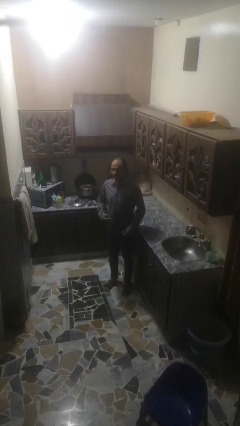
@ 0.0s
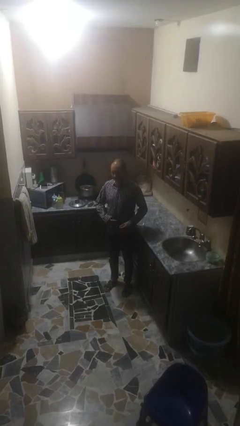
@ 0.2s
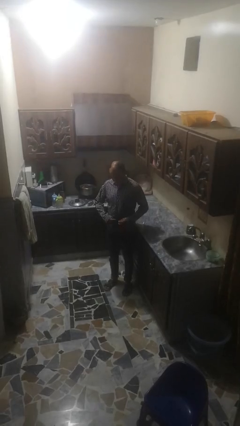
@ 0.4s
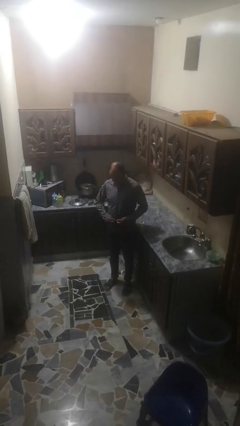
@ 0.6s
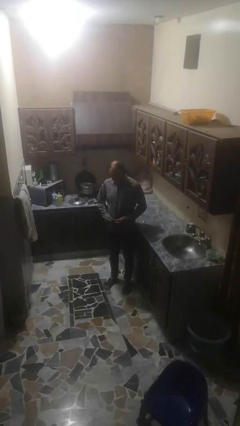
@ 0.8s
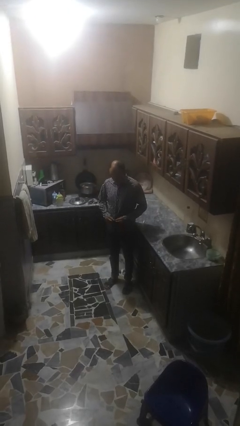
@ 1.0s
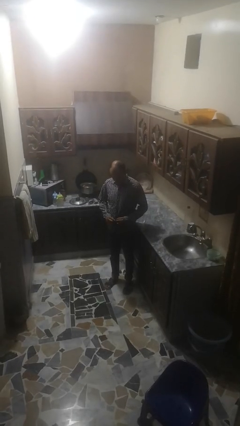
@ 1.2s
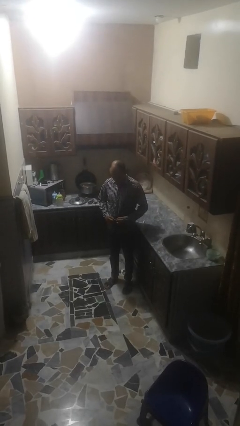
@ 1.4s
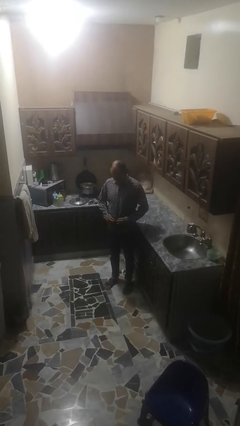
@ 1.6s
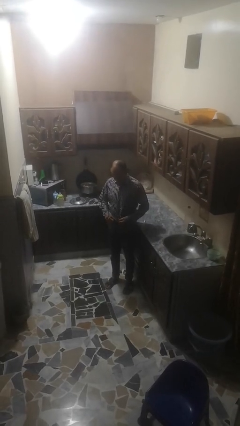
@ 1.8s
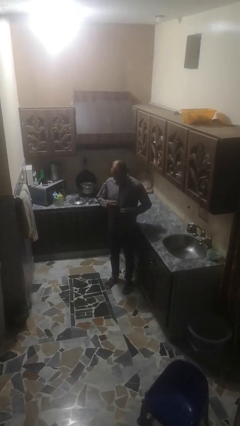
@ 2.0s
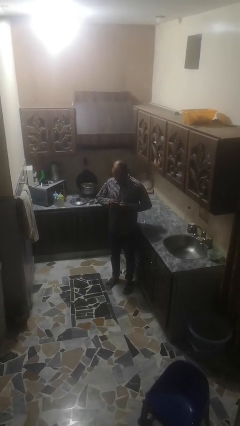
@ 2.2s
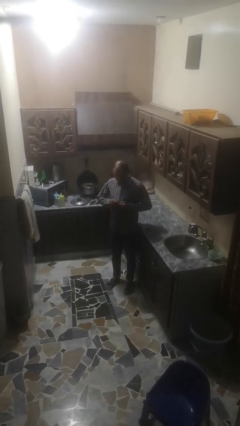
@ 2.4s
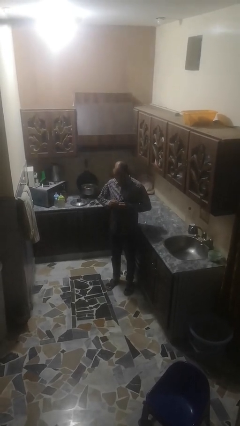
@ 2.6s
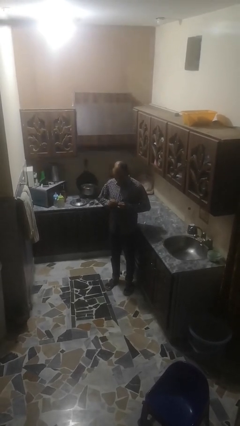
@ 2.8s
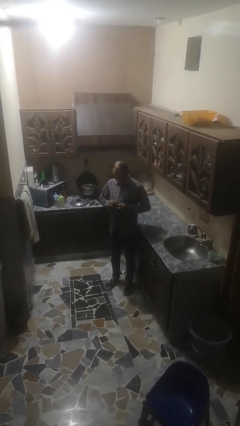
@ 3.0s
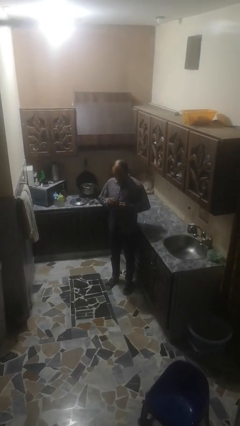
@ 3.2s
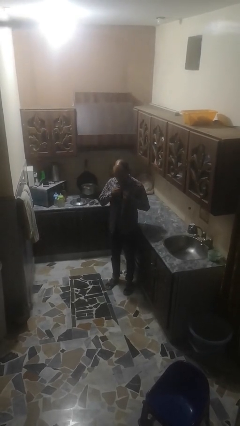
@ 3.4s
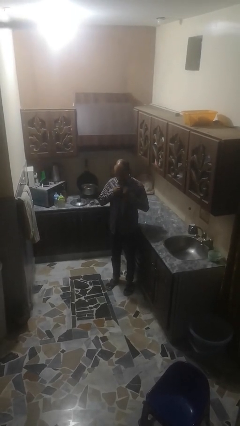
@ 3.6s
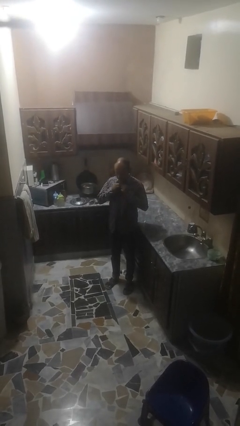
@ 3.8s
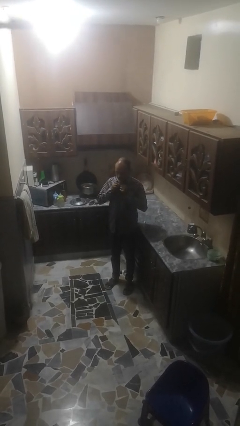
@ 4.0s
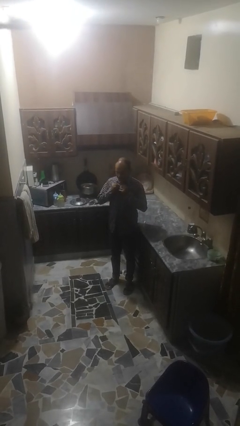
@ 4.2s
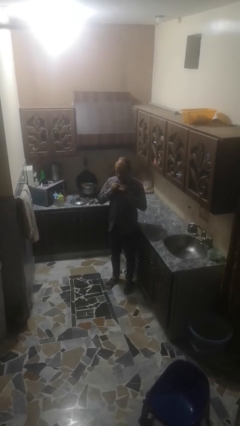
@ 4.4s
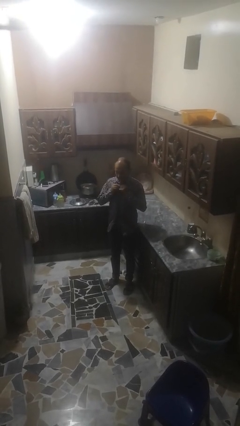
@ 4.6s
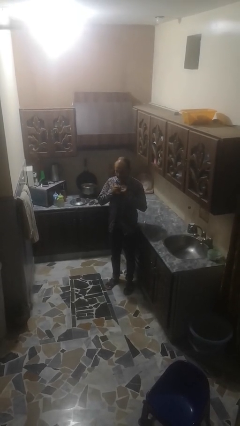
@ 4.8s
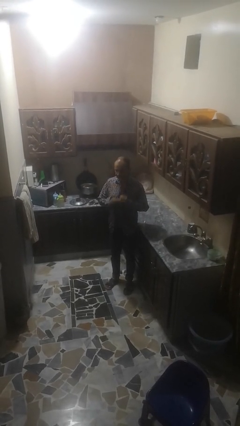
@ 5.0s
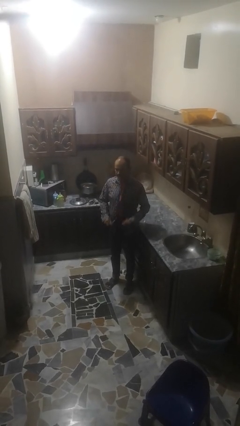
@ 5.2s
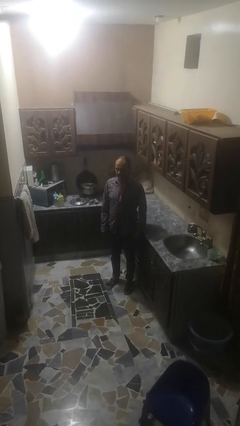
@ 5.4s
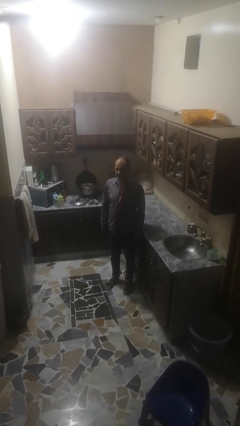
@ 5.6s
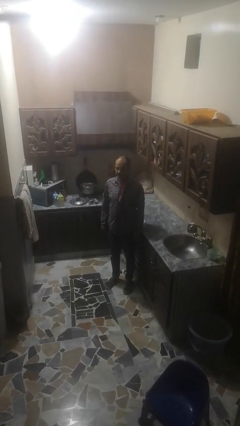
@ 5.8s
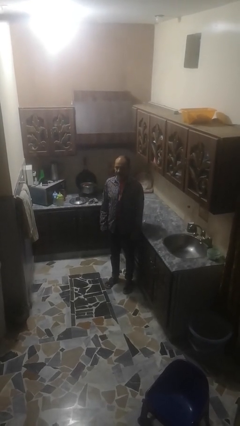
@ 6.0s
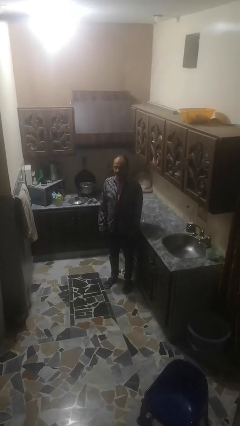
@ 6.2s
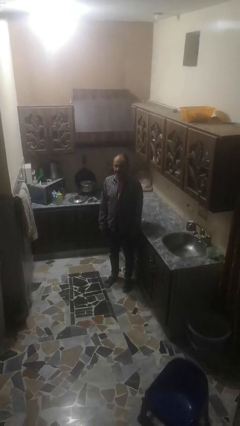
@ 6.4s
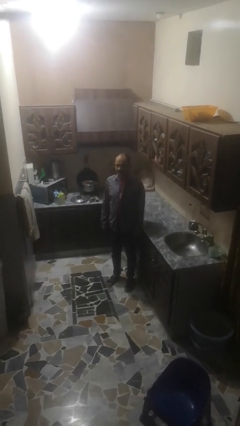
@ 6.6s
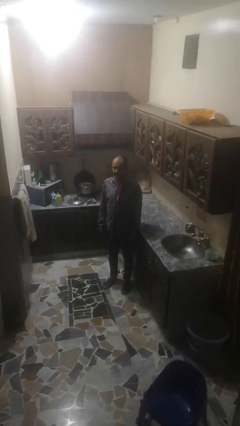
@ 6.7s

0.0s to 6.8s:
person unbuttons shirt

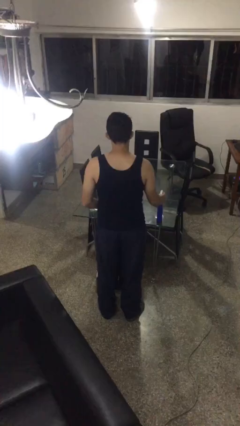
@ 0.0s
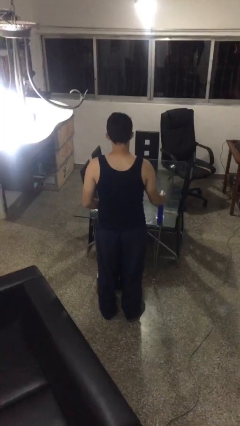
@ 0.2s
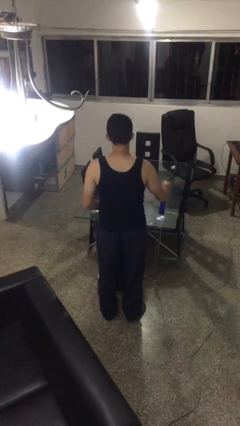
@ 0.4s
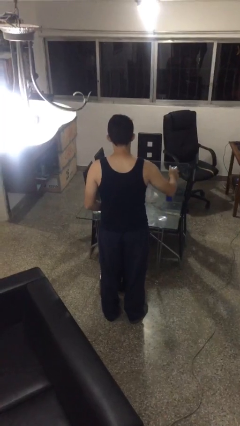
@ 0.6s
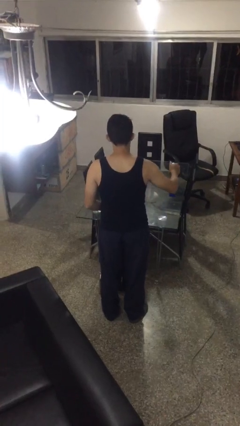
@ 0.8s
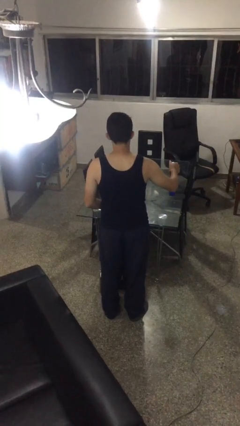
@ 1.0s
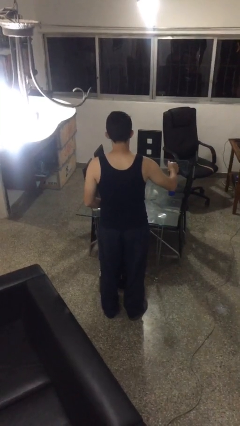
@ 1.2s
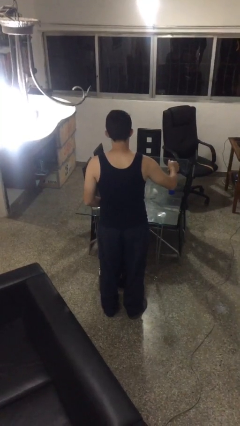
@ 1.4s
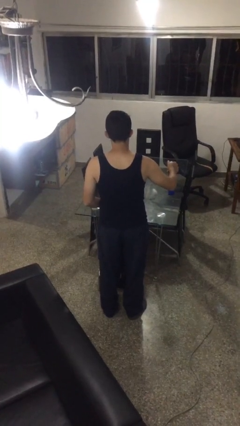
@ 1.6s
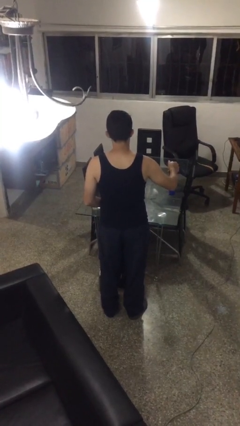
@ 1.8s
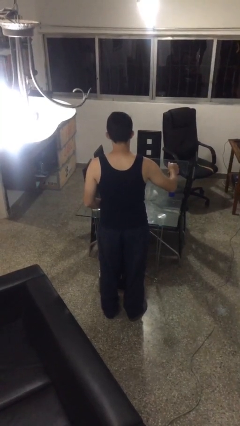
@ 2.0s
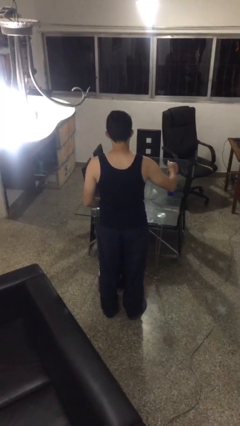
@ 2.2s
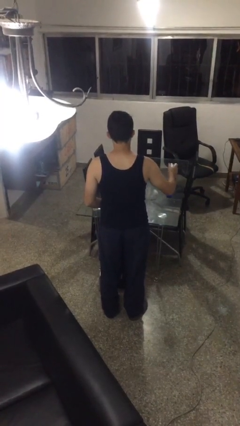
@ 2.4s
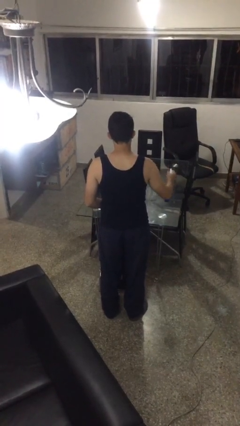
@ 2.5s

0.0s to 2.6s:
person sprays from bottle

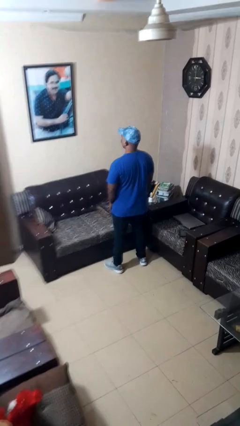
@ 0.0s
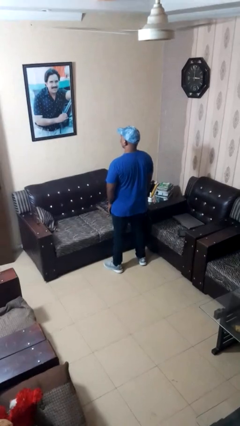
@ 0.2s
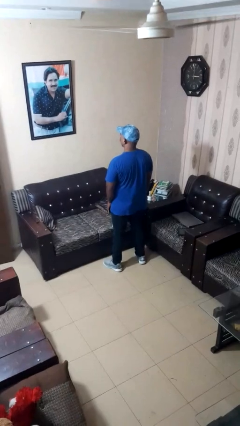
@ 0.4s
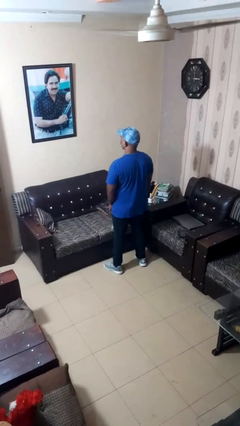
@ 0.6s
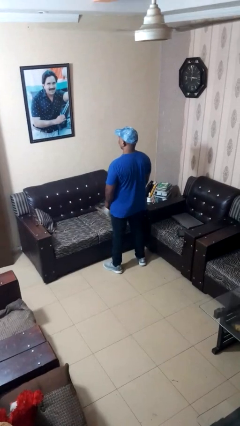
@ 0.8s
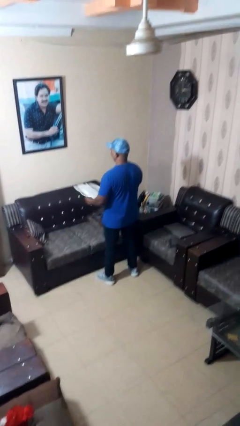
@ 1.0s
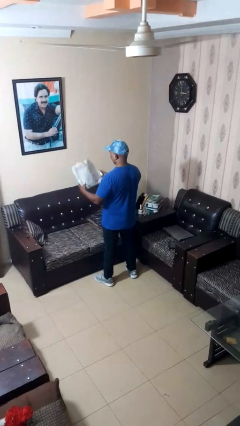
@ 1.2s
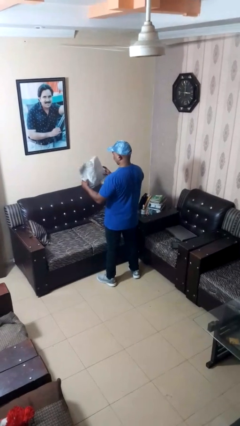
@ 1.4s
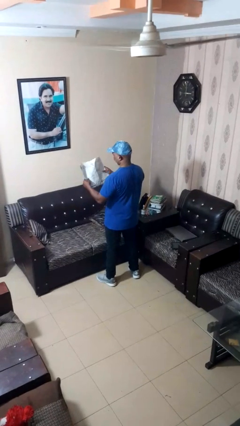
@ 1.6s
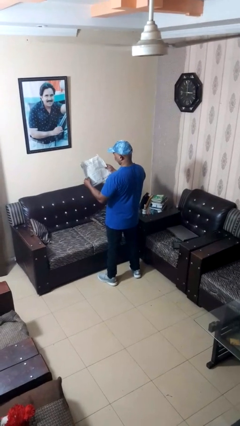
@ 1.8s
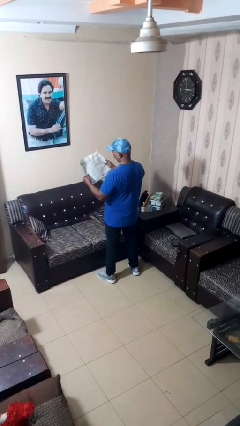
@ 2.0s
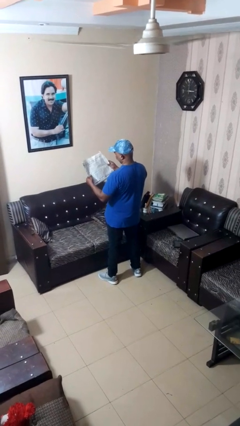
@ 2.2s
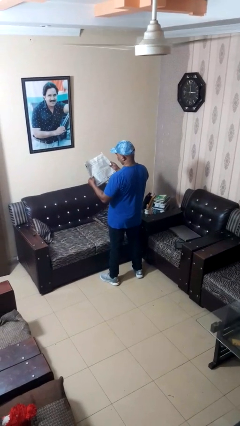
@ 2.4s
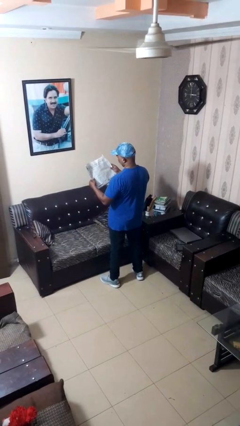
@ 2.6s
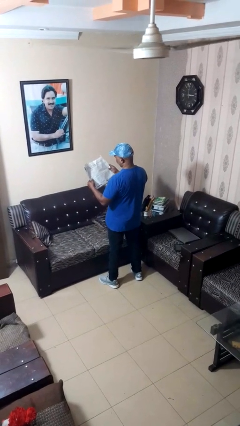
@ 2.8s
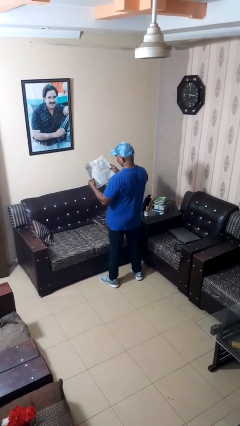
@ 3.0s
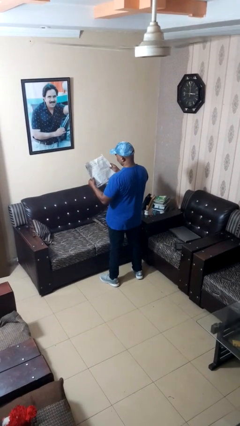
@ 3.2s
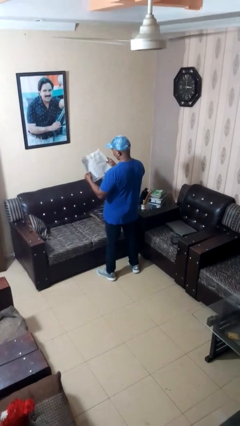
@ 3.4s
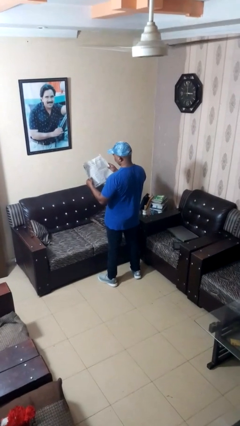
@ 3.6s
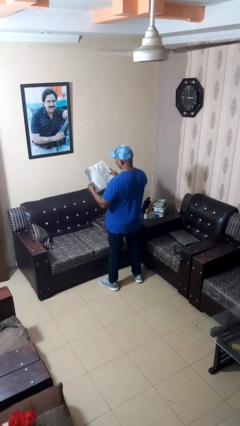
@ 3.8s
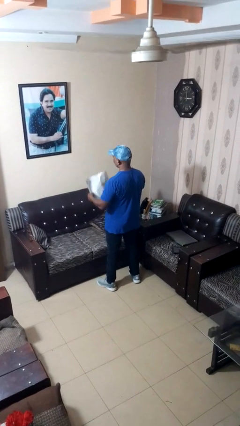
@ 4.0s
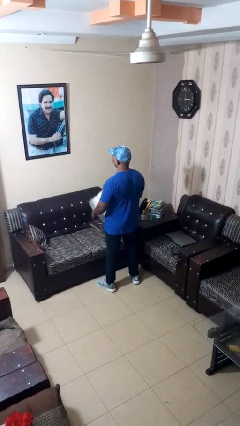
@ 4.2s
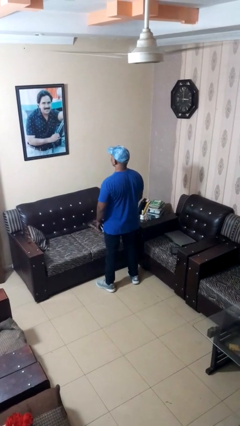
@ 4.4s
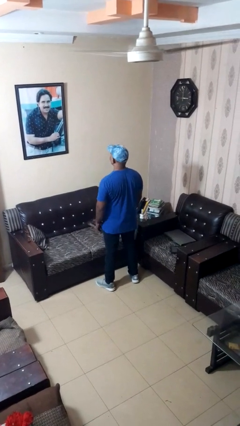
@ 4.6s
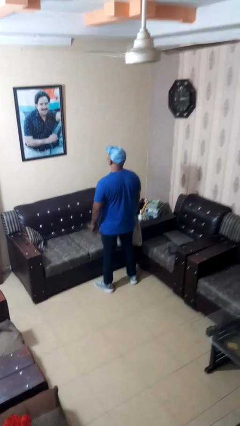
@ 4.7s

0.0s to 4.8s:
person reads newspaper

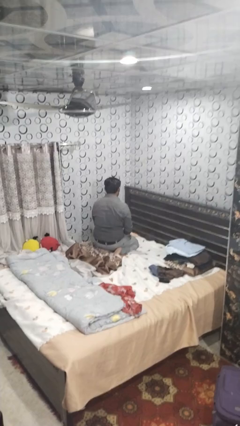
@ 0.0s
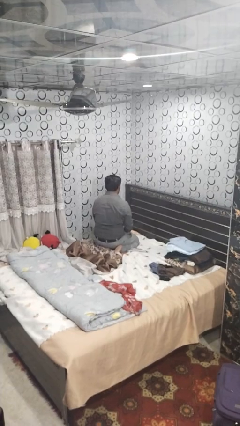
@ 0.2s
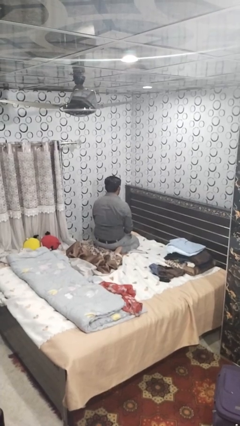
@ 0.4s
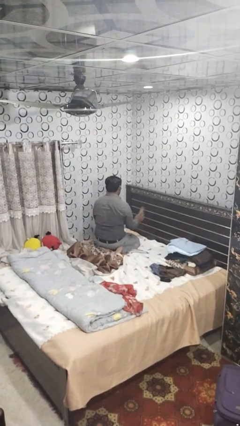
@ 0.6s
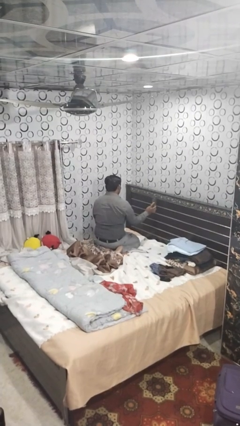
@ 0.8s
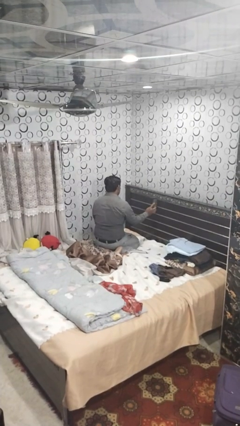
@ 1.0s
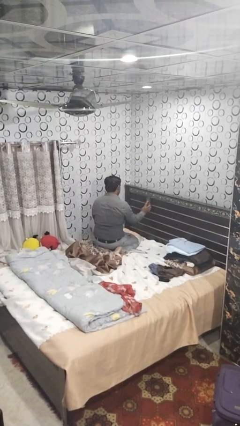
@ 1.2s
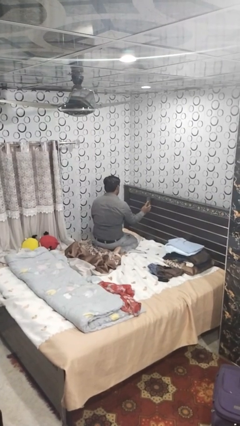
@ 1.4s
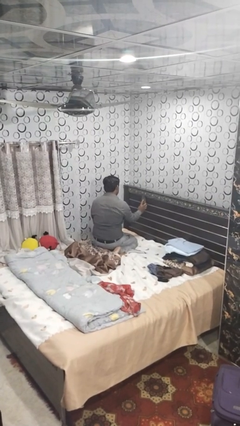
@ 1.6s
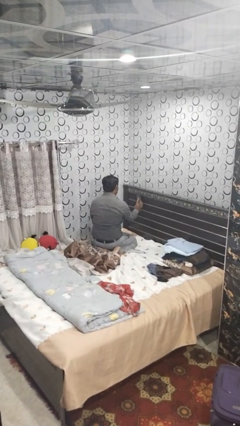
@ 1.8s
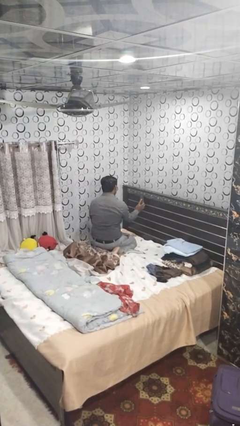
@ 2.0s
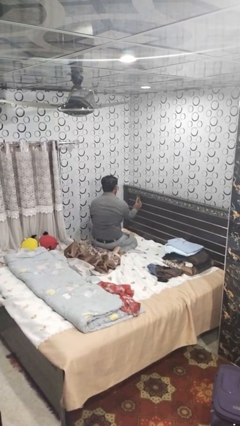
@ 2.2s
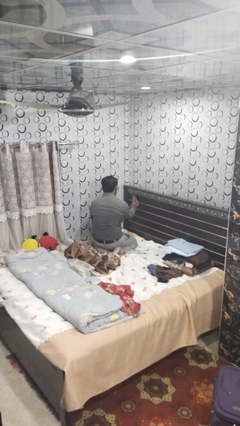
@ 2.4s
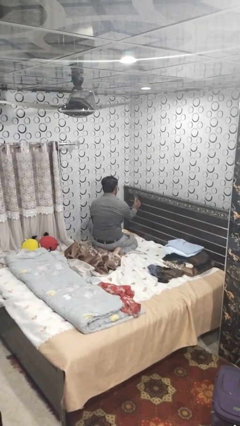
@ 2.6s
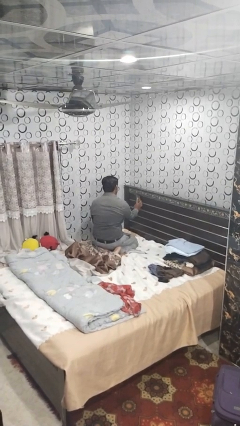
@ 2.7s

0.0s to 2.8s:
person dusts furniture

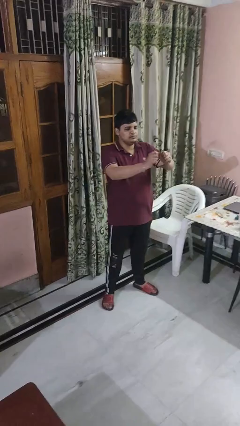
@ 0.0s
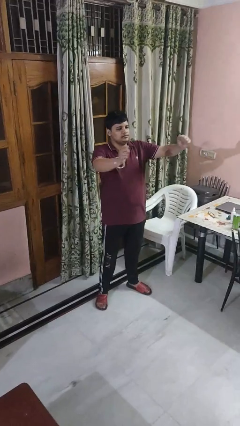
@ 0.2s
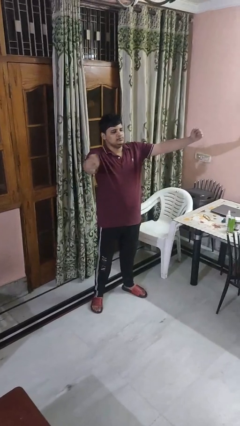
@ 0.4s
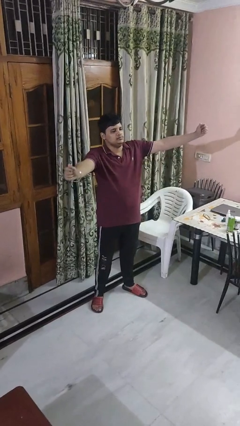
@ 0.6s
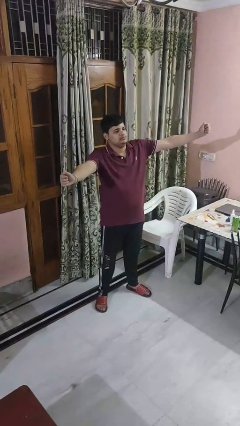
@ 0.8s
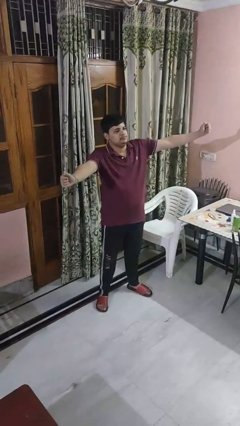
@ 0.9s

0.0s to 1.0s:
person gestures zoom in
